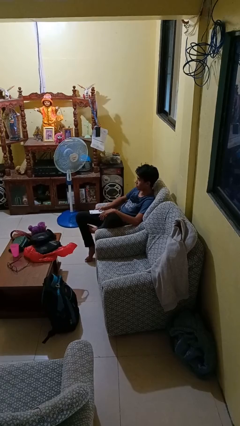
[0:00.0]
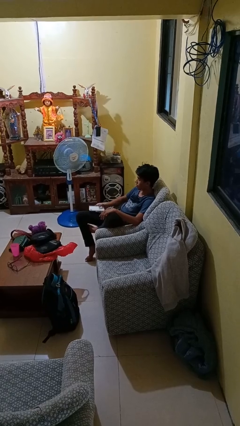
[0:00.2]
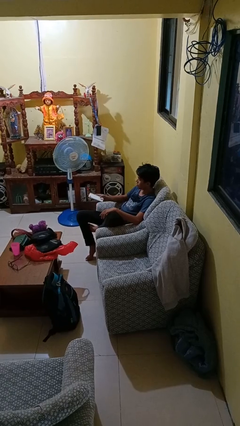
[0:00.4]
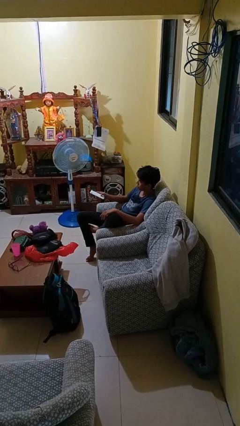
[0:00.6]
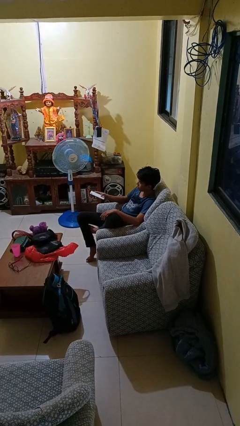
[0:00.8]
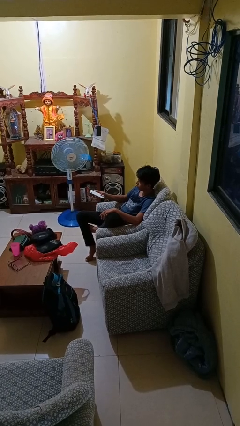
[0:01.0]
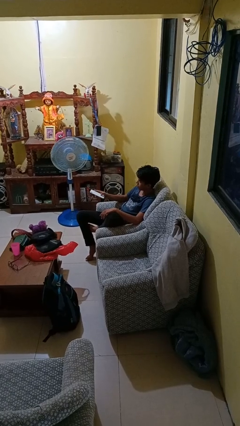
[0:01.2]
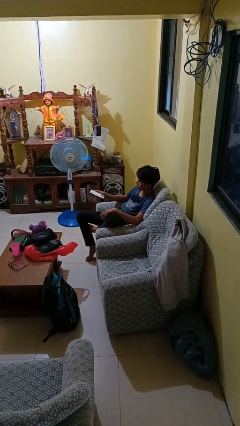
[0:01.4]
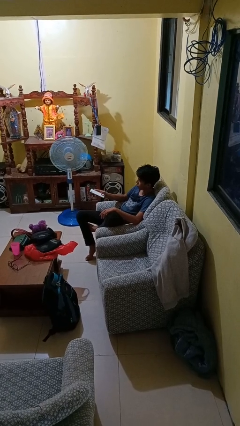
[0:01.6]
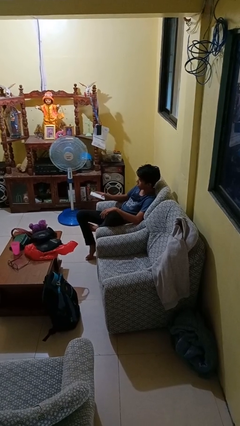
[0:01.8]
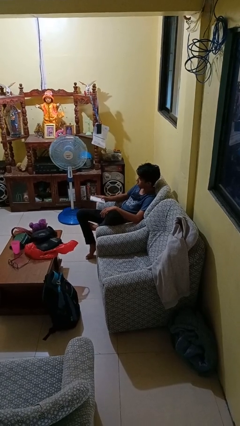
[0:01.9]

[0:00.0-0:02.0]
person uses television remote

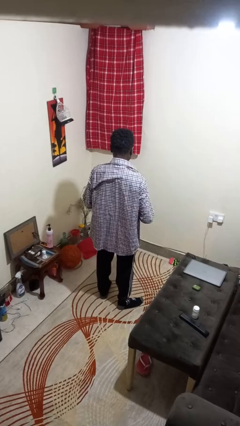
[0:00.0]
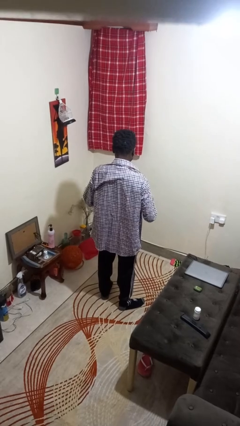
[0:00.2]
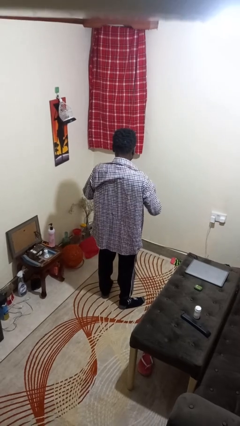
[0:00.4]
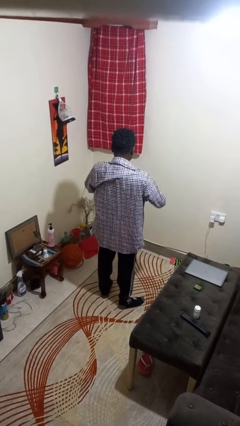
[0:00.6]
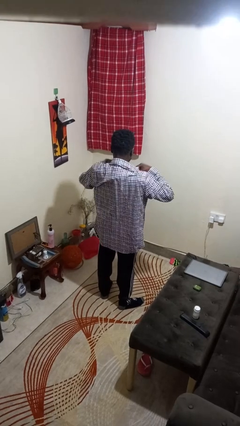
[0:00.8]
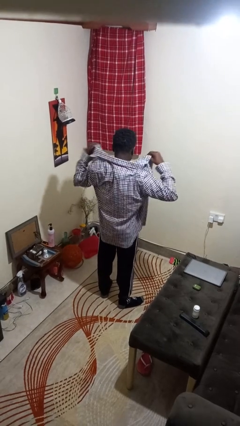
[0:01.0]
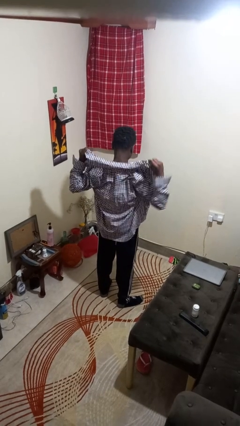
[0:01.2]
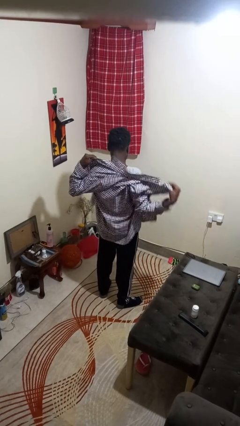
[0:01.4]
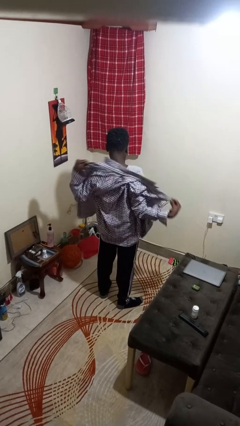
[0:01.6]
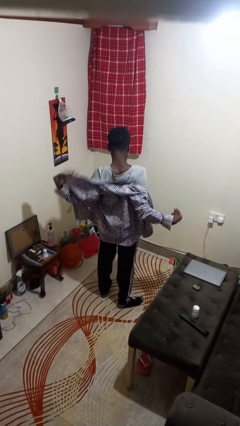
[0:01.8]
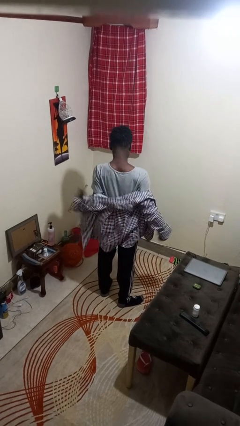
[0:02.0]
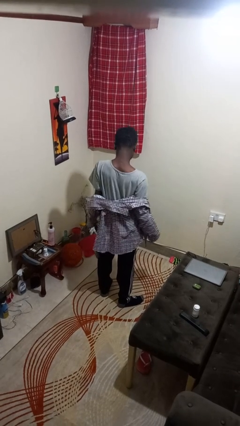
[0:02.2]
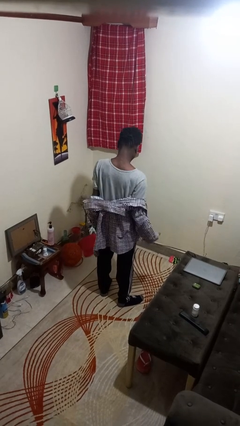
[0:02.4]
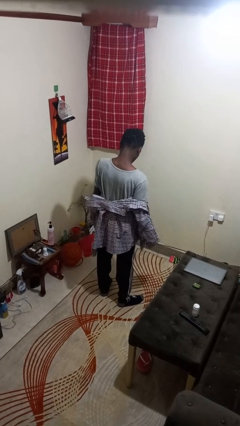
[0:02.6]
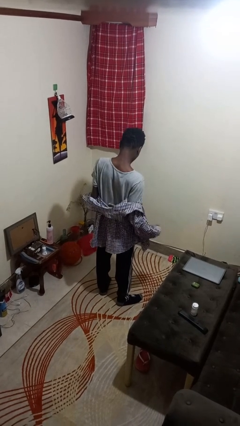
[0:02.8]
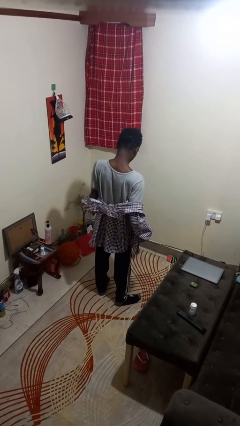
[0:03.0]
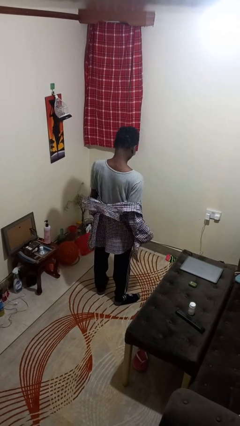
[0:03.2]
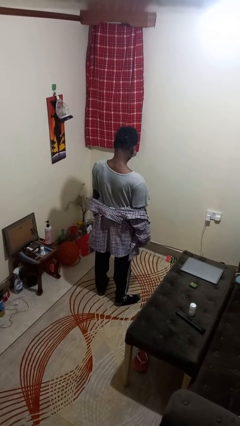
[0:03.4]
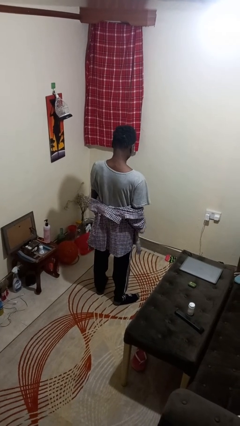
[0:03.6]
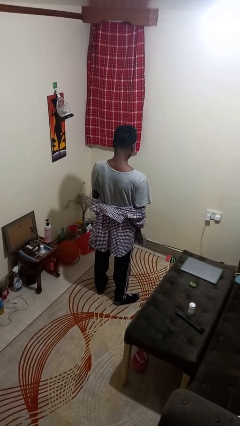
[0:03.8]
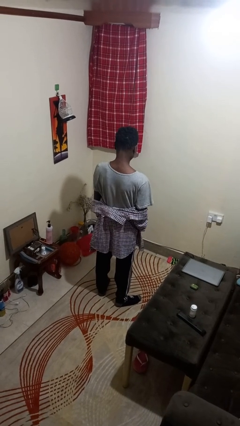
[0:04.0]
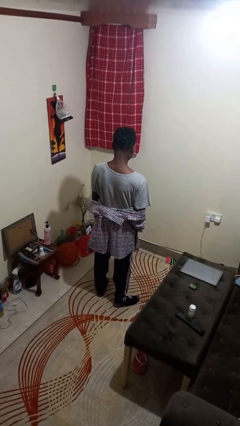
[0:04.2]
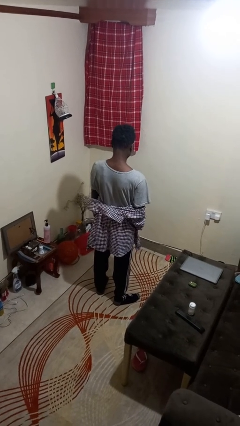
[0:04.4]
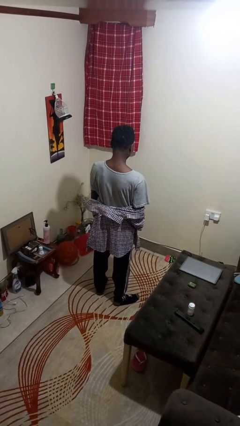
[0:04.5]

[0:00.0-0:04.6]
person takes off shirt

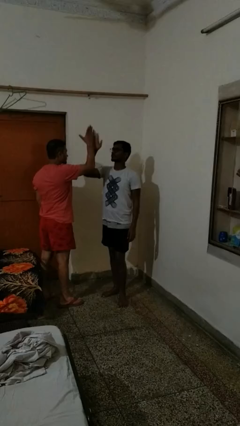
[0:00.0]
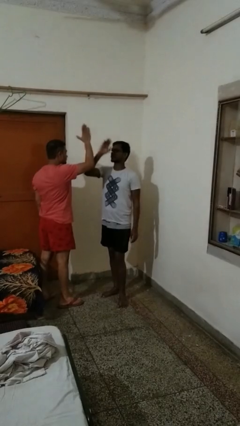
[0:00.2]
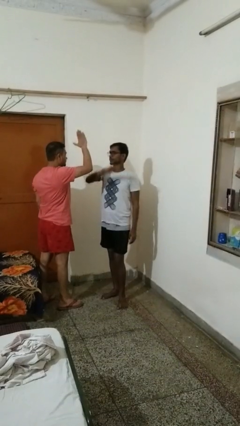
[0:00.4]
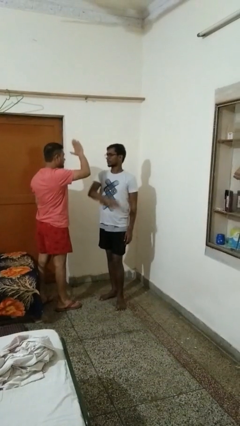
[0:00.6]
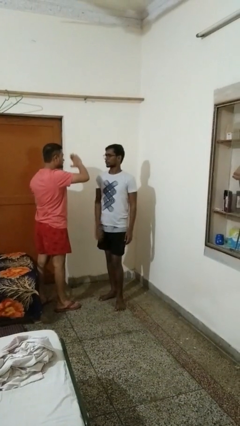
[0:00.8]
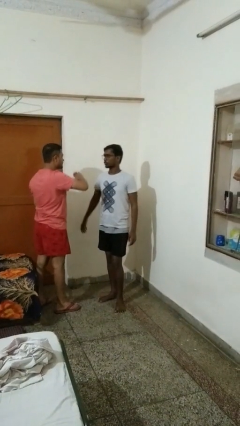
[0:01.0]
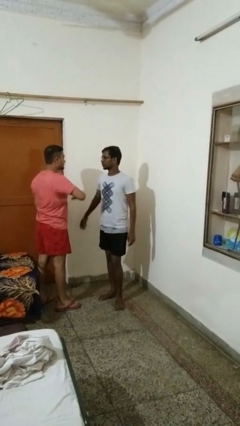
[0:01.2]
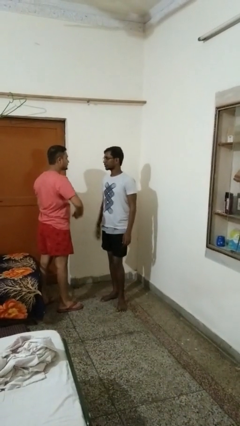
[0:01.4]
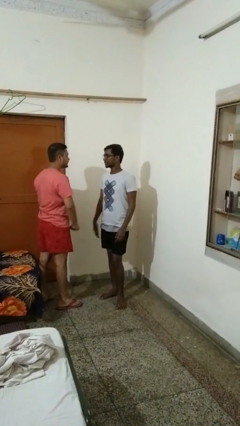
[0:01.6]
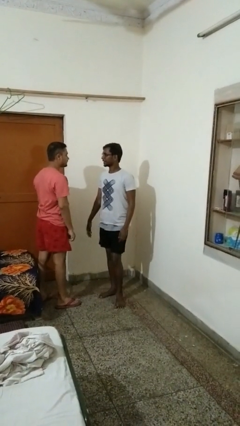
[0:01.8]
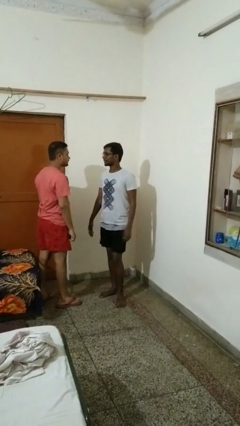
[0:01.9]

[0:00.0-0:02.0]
person highfives hand

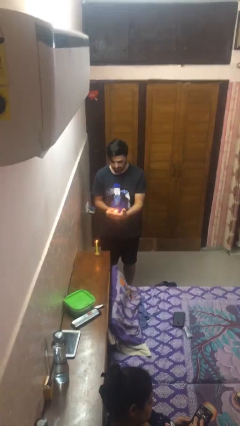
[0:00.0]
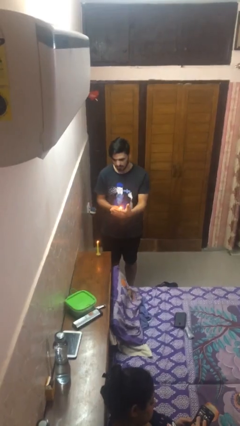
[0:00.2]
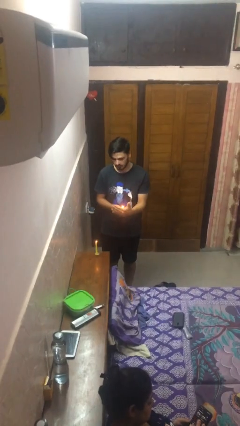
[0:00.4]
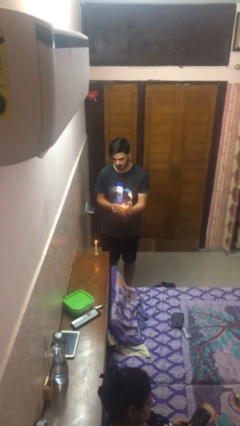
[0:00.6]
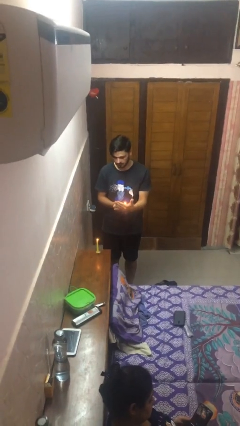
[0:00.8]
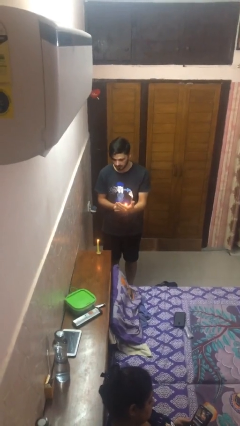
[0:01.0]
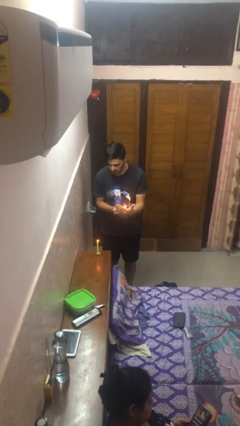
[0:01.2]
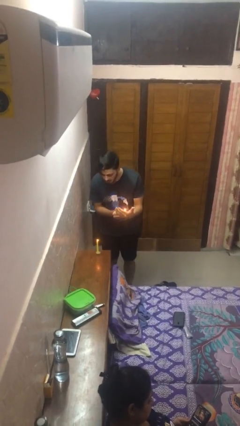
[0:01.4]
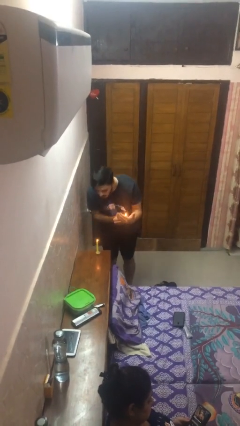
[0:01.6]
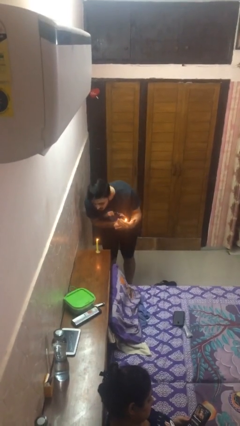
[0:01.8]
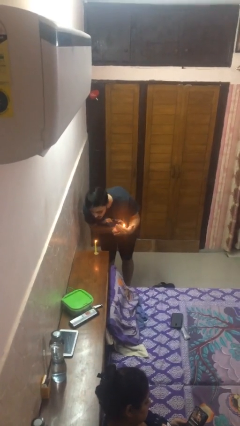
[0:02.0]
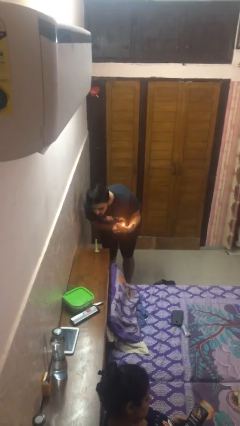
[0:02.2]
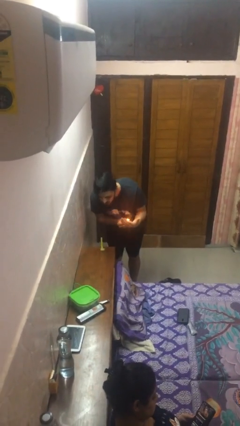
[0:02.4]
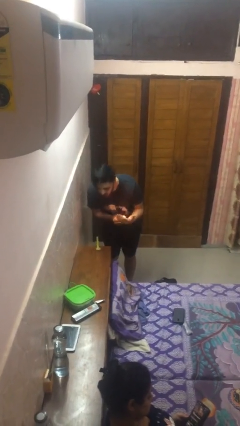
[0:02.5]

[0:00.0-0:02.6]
person extinguishes candle

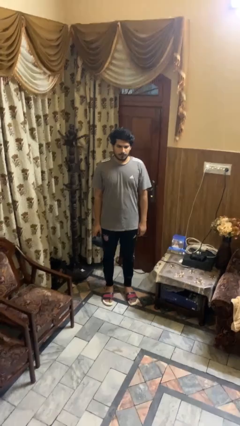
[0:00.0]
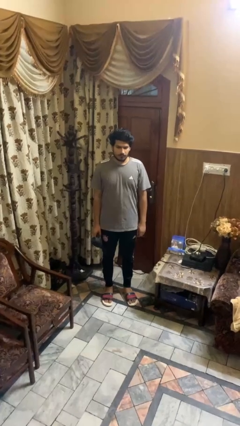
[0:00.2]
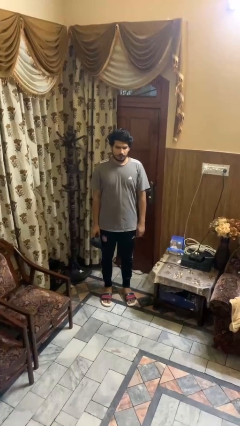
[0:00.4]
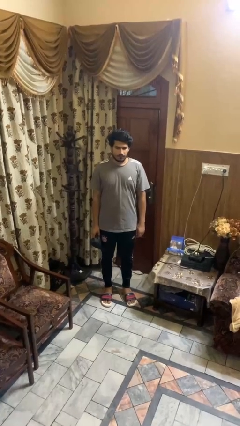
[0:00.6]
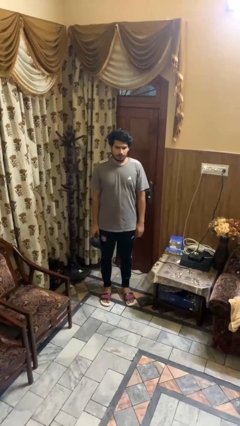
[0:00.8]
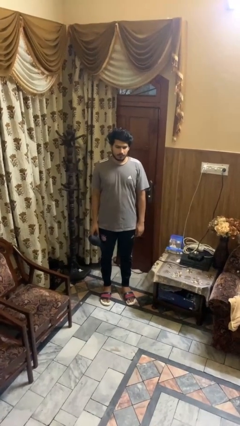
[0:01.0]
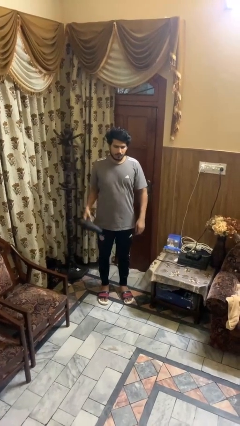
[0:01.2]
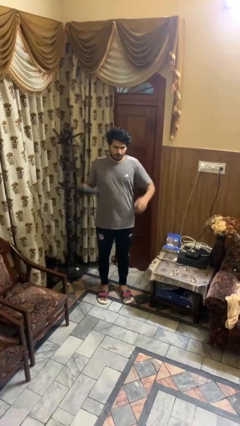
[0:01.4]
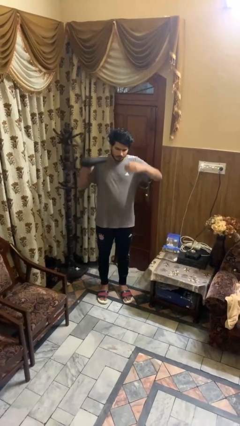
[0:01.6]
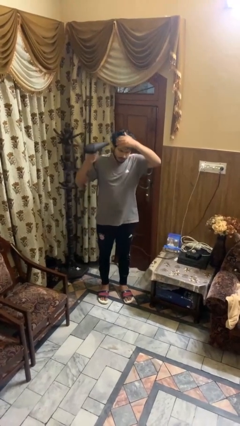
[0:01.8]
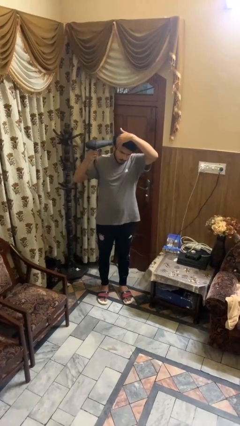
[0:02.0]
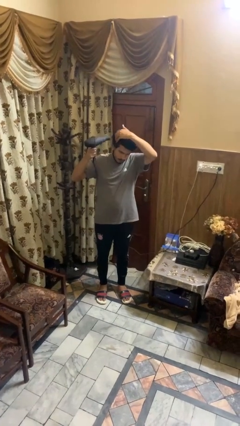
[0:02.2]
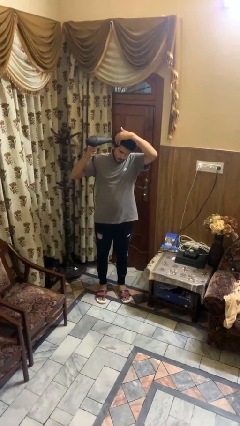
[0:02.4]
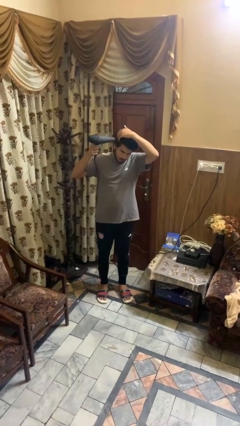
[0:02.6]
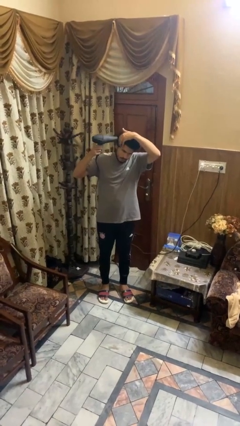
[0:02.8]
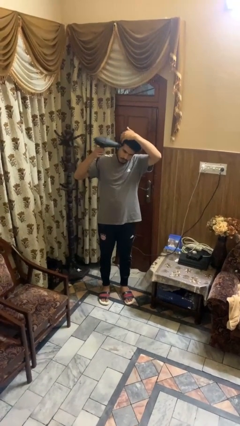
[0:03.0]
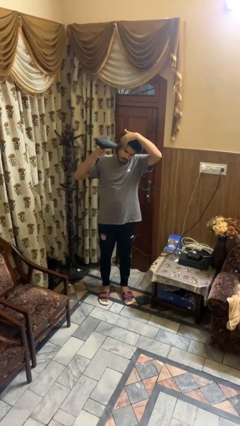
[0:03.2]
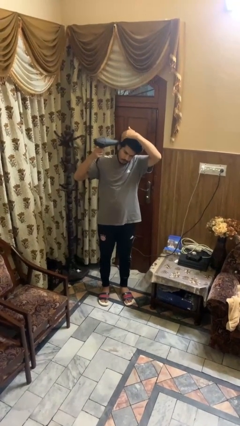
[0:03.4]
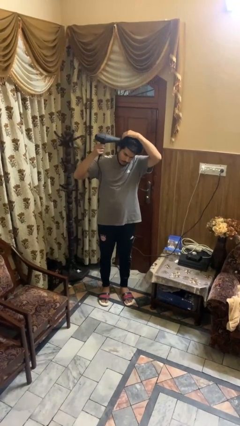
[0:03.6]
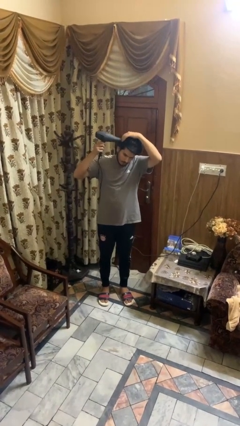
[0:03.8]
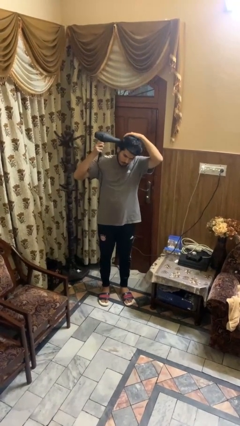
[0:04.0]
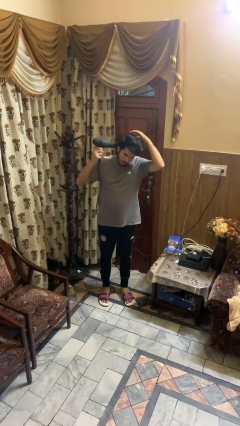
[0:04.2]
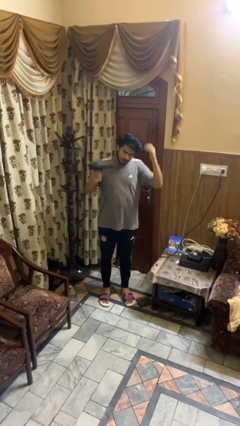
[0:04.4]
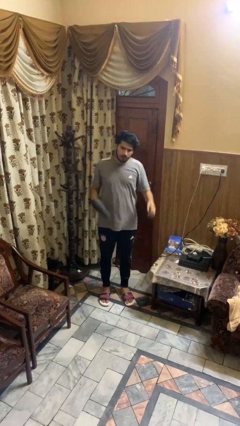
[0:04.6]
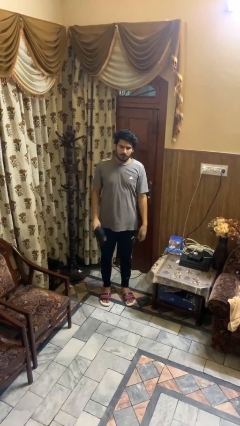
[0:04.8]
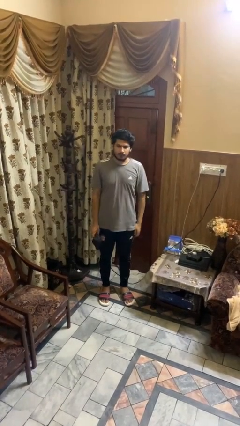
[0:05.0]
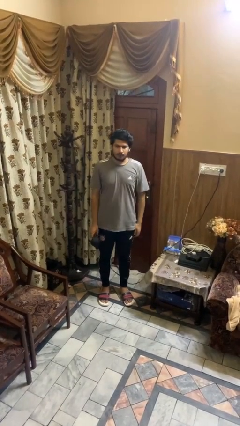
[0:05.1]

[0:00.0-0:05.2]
person dries hair with hairdryer

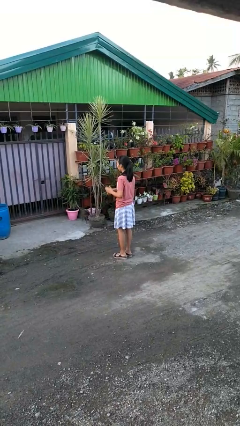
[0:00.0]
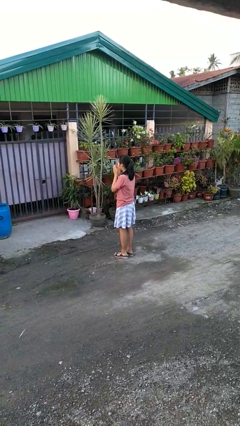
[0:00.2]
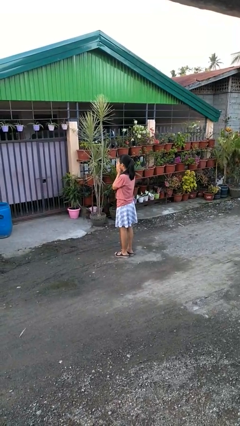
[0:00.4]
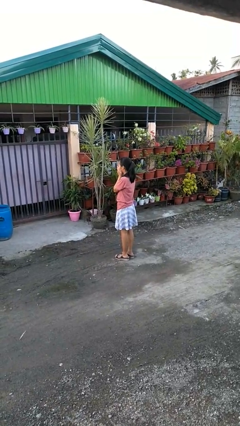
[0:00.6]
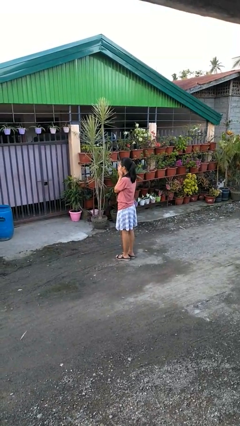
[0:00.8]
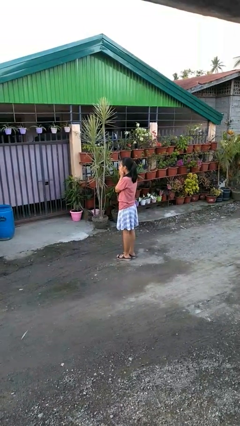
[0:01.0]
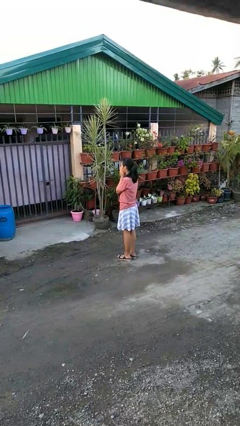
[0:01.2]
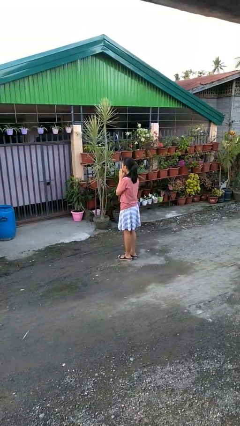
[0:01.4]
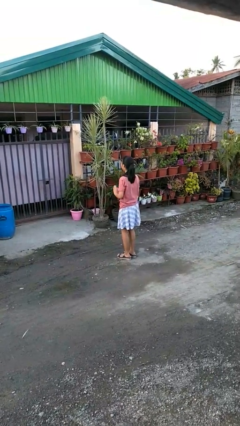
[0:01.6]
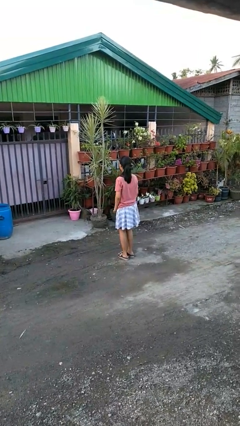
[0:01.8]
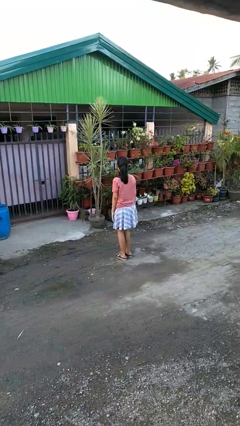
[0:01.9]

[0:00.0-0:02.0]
person blows into hands
